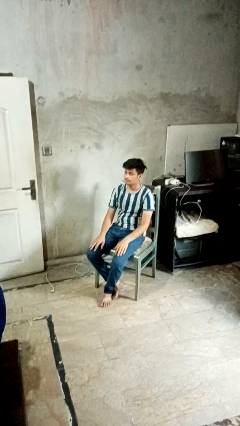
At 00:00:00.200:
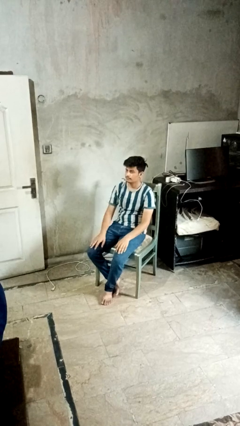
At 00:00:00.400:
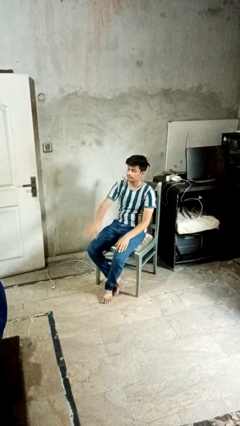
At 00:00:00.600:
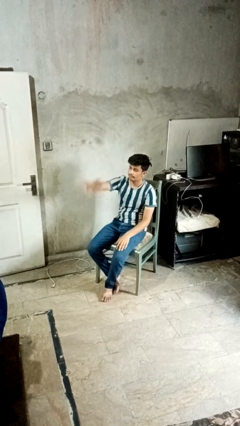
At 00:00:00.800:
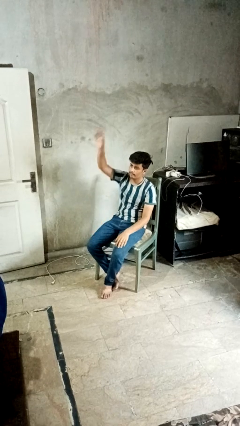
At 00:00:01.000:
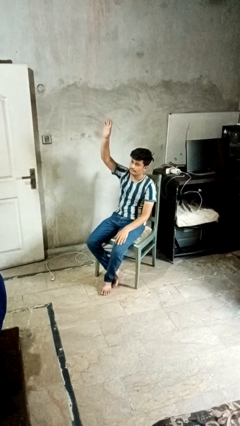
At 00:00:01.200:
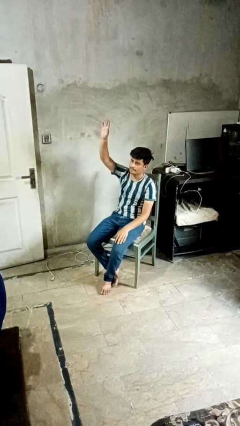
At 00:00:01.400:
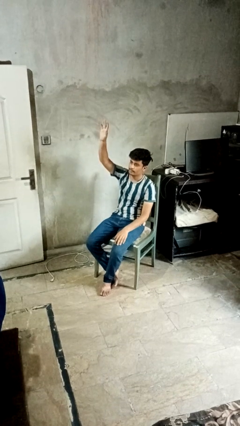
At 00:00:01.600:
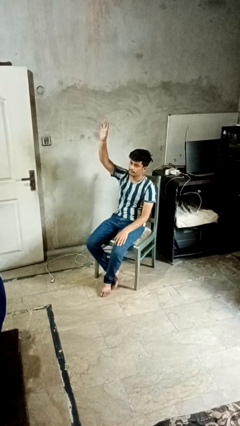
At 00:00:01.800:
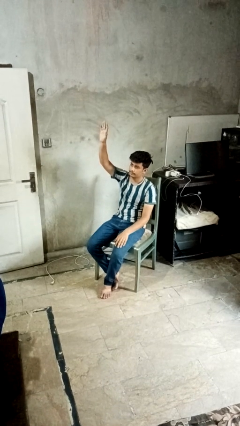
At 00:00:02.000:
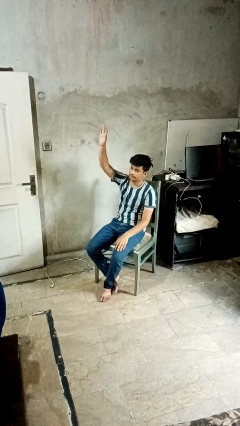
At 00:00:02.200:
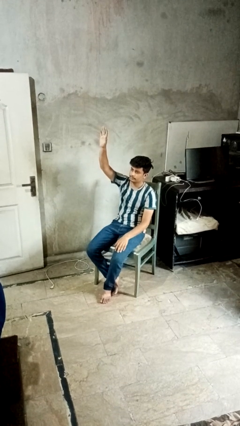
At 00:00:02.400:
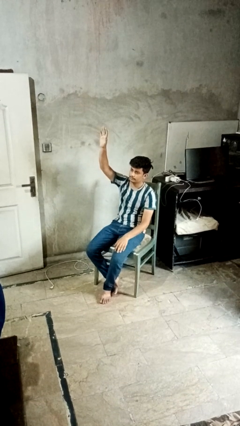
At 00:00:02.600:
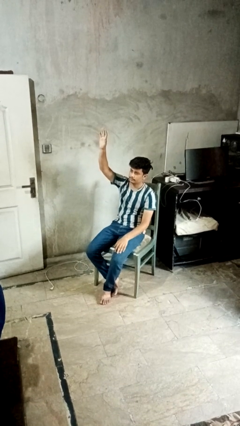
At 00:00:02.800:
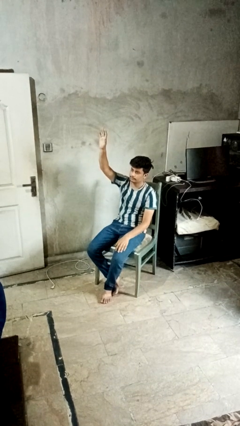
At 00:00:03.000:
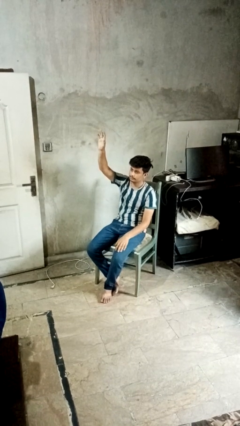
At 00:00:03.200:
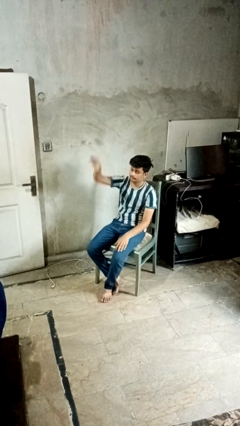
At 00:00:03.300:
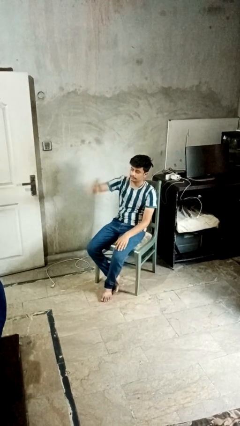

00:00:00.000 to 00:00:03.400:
person gestures raise hand

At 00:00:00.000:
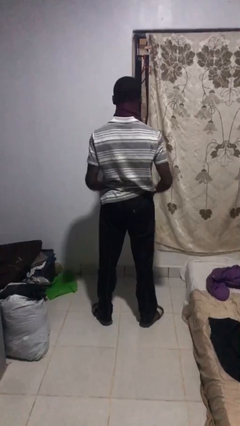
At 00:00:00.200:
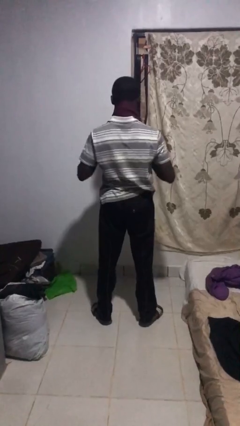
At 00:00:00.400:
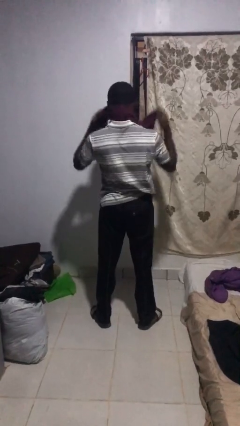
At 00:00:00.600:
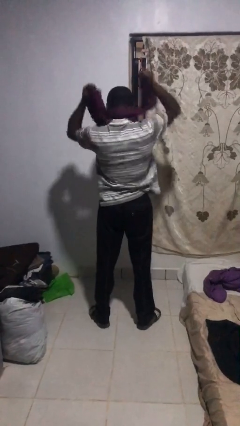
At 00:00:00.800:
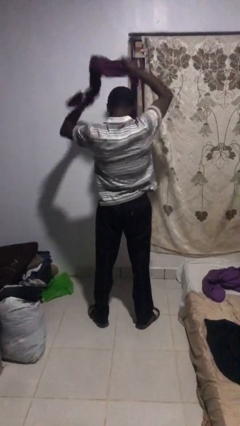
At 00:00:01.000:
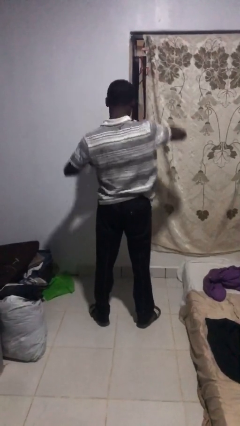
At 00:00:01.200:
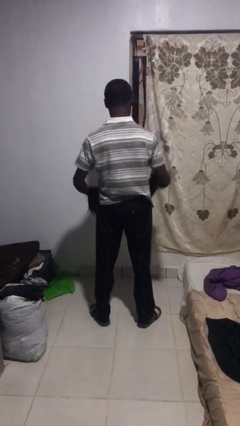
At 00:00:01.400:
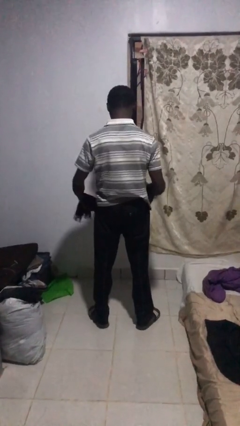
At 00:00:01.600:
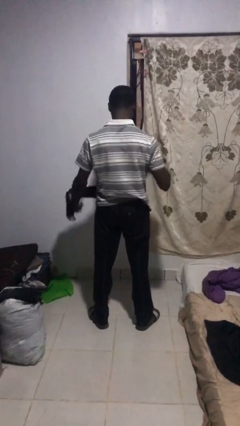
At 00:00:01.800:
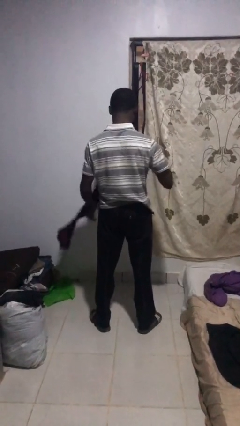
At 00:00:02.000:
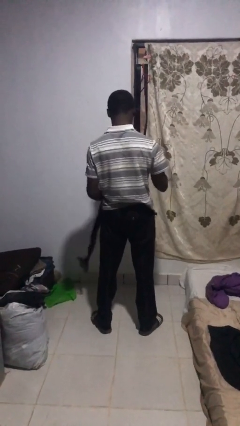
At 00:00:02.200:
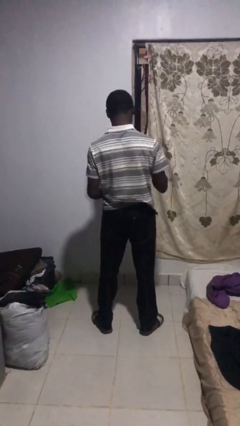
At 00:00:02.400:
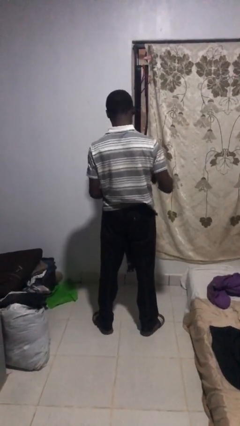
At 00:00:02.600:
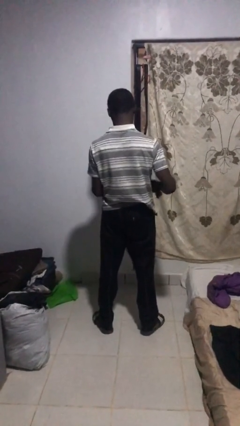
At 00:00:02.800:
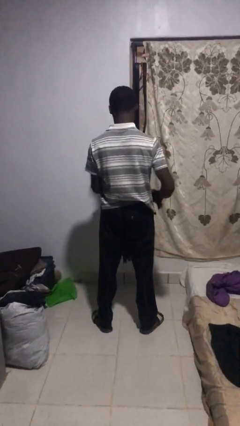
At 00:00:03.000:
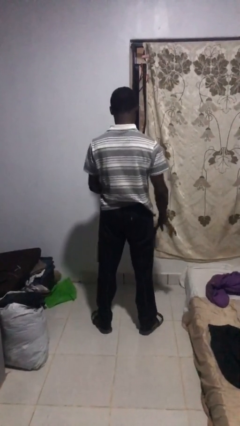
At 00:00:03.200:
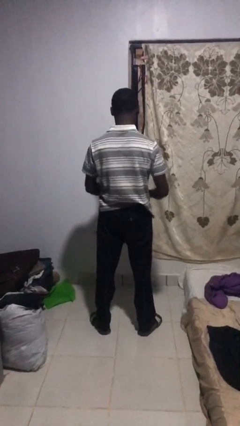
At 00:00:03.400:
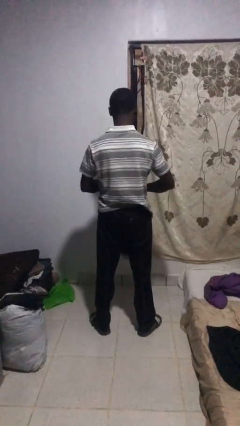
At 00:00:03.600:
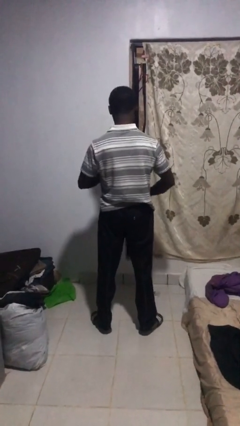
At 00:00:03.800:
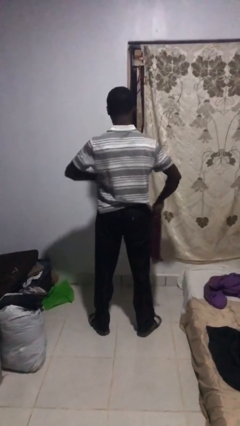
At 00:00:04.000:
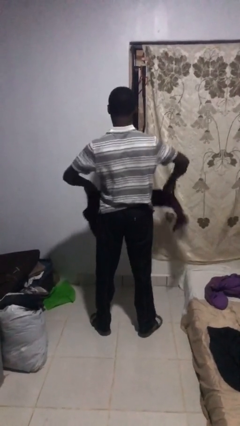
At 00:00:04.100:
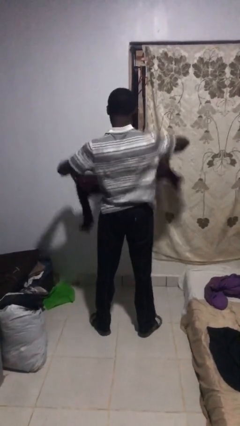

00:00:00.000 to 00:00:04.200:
person takes off scarf

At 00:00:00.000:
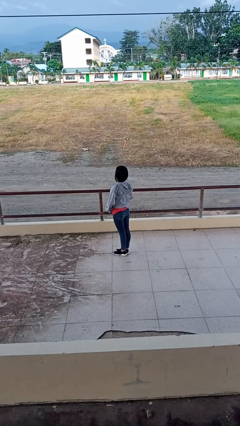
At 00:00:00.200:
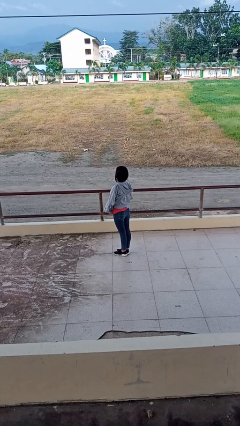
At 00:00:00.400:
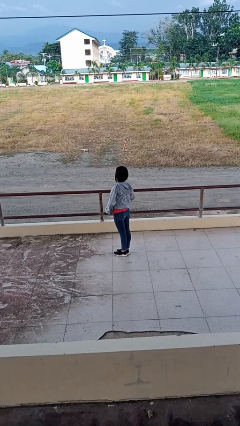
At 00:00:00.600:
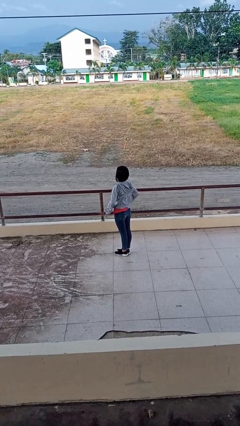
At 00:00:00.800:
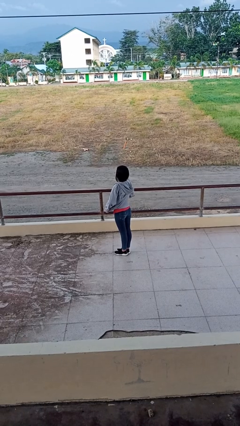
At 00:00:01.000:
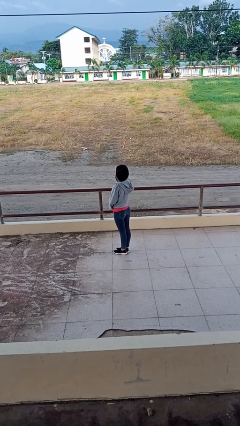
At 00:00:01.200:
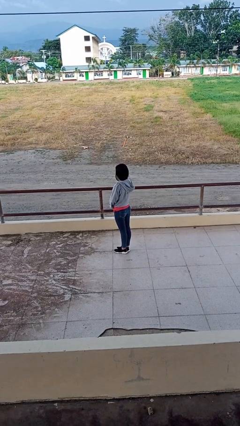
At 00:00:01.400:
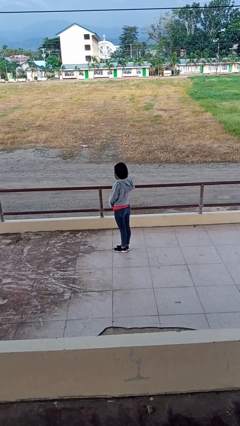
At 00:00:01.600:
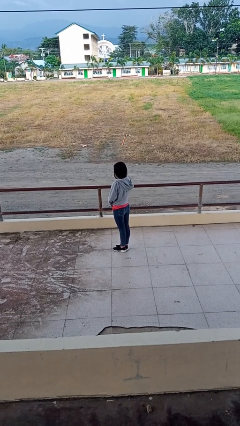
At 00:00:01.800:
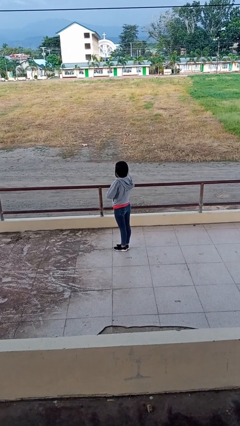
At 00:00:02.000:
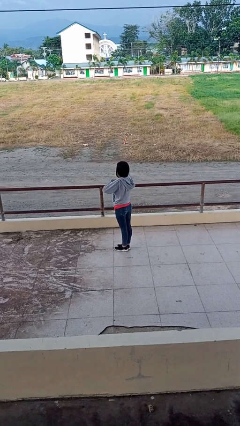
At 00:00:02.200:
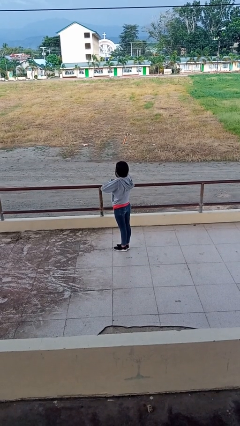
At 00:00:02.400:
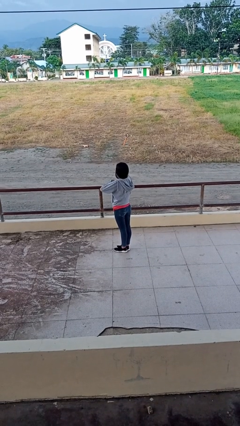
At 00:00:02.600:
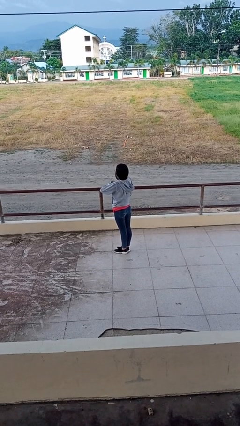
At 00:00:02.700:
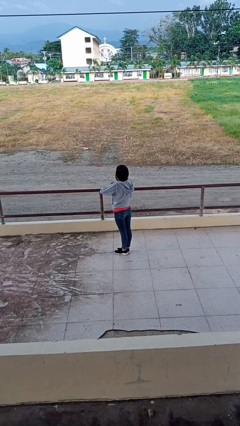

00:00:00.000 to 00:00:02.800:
person zips up jacket

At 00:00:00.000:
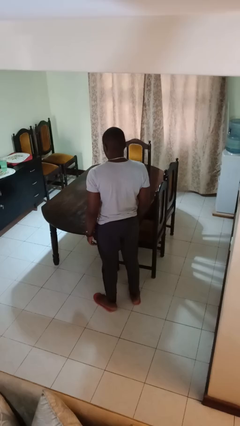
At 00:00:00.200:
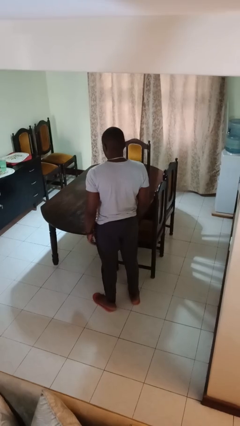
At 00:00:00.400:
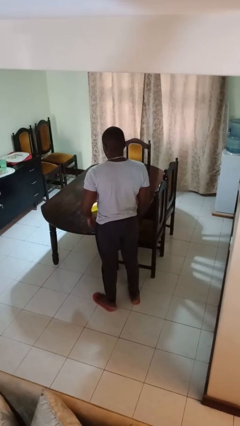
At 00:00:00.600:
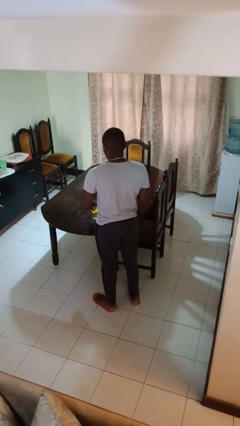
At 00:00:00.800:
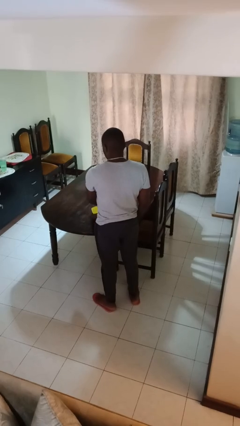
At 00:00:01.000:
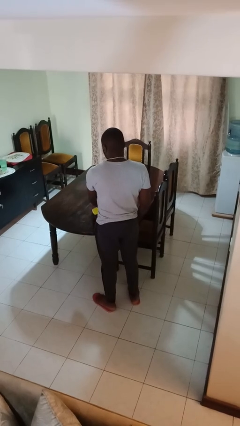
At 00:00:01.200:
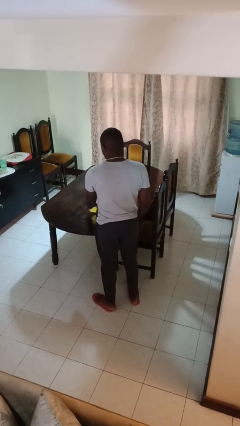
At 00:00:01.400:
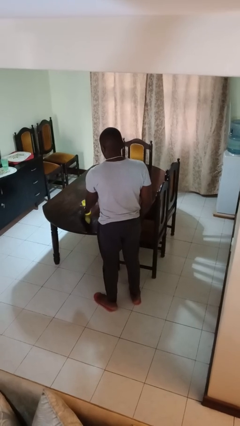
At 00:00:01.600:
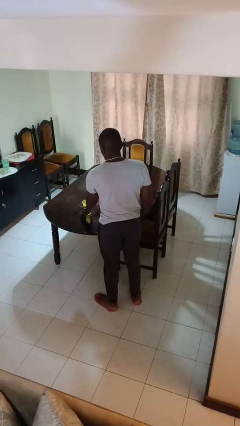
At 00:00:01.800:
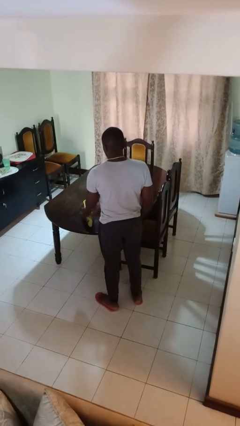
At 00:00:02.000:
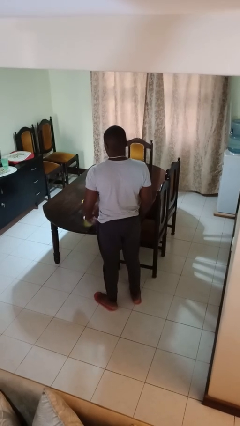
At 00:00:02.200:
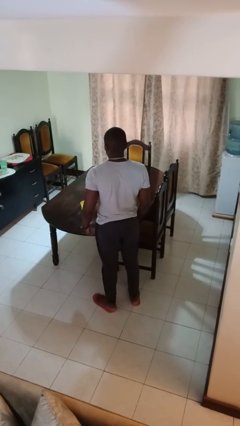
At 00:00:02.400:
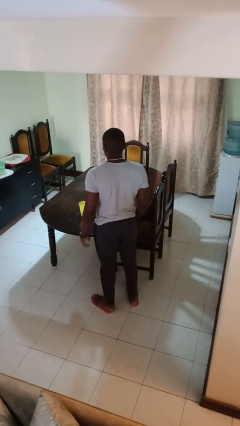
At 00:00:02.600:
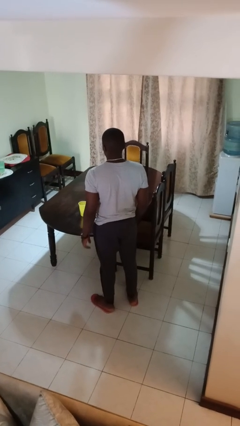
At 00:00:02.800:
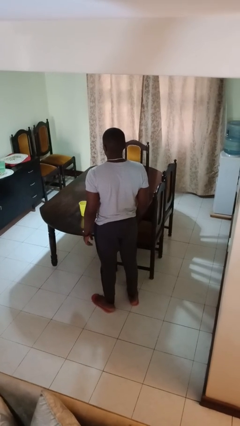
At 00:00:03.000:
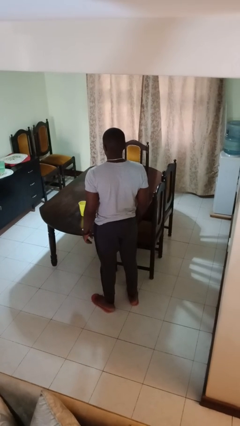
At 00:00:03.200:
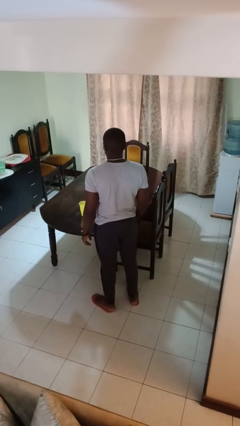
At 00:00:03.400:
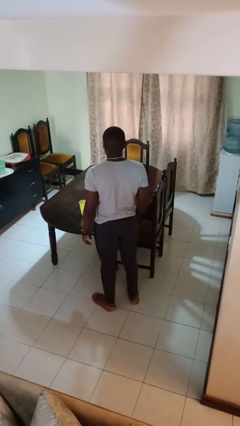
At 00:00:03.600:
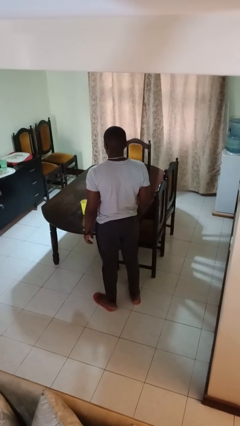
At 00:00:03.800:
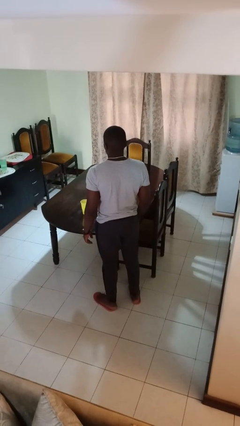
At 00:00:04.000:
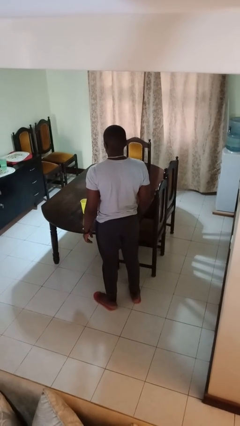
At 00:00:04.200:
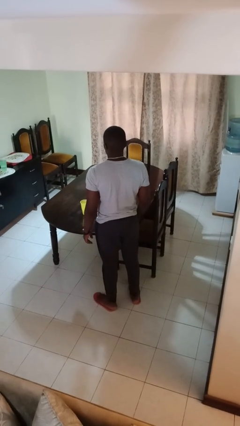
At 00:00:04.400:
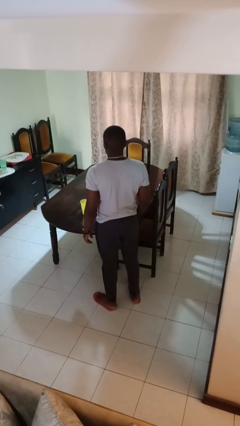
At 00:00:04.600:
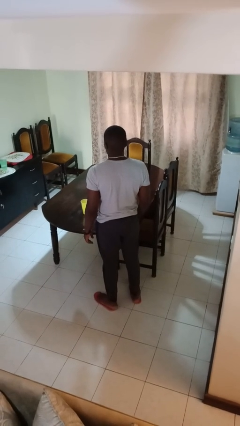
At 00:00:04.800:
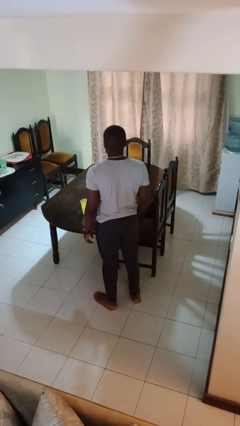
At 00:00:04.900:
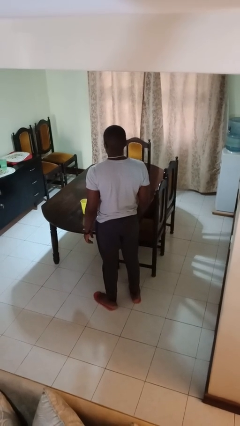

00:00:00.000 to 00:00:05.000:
person sets upright glass

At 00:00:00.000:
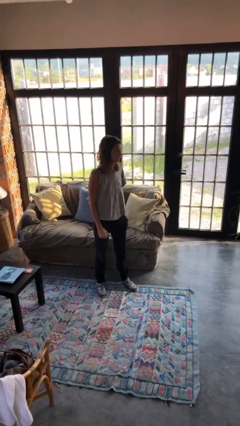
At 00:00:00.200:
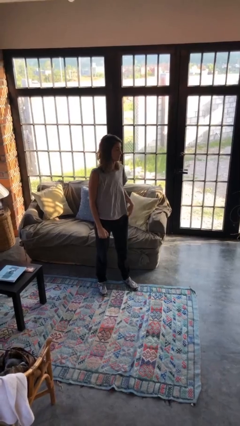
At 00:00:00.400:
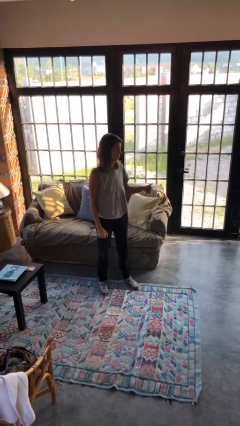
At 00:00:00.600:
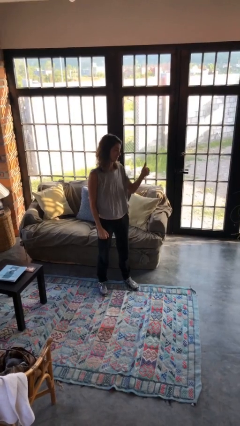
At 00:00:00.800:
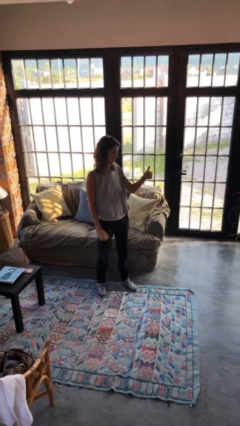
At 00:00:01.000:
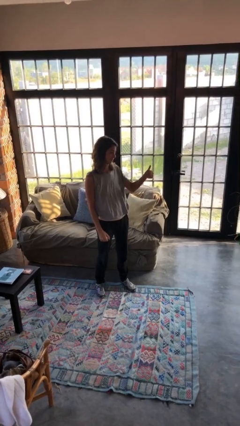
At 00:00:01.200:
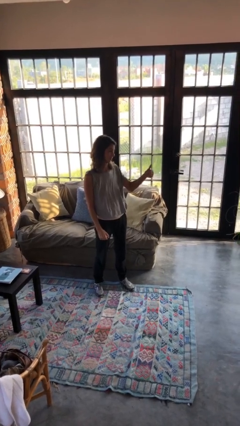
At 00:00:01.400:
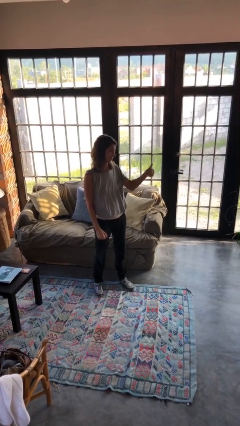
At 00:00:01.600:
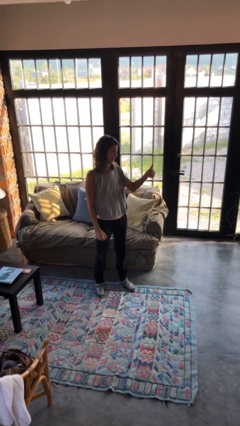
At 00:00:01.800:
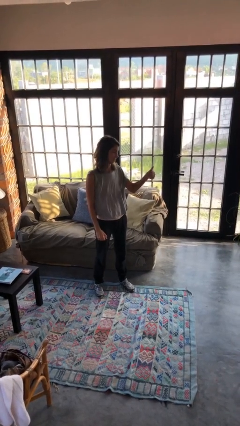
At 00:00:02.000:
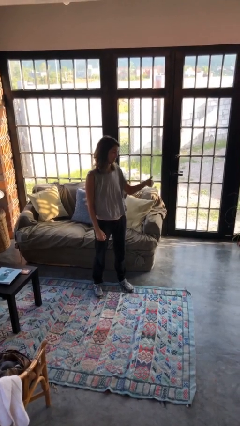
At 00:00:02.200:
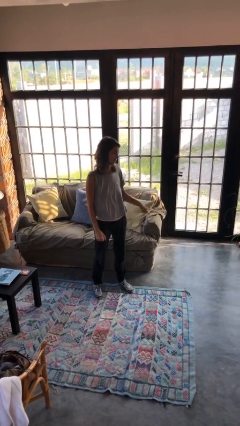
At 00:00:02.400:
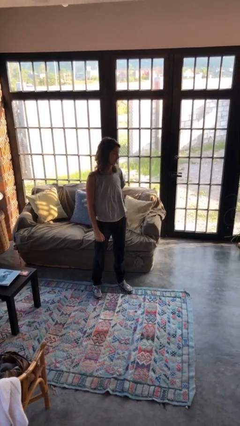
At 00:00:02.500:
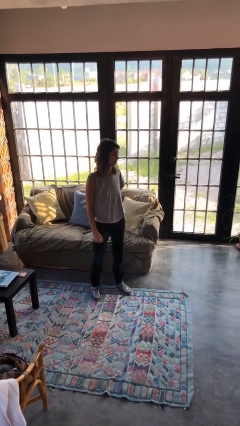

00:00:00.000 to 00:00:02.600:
person gestures thumbs up
